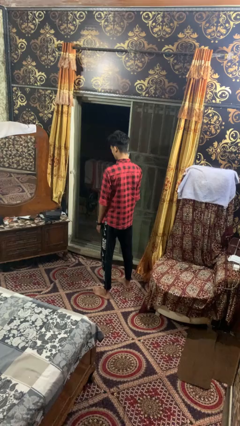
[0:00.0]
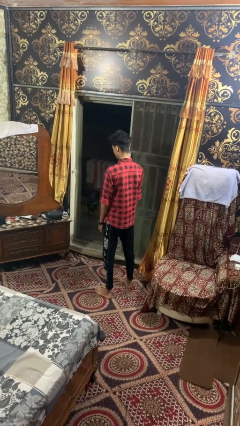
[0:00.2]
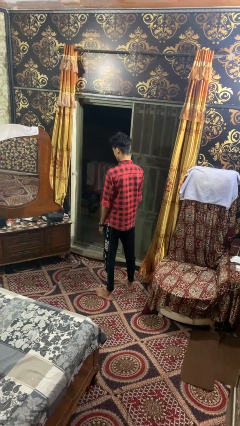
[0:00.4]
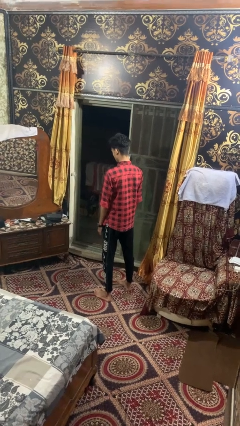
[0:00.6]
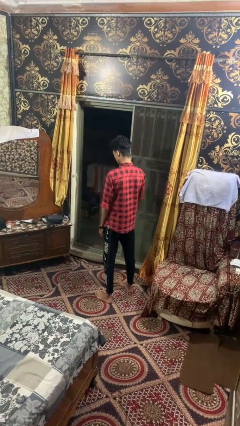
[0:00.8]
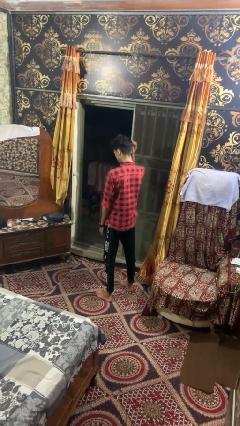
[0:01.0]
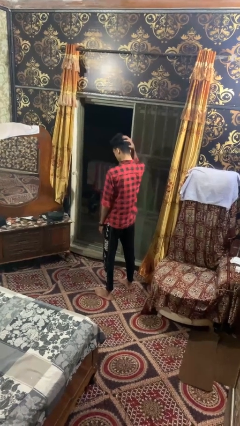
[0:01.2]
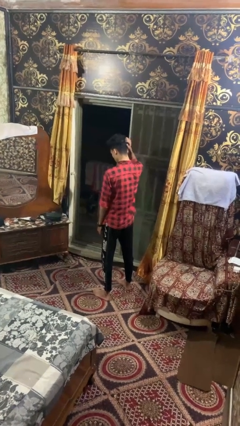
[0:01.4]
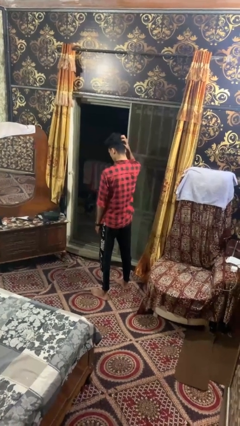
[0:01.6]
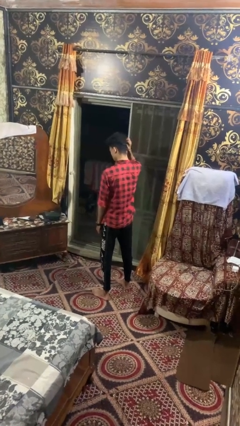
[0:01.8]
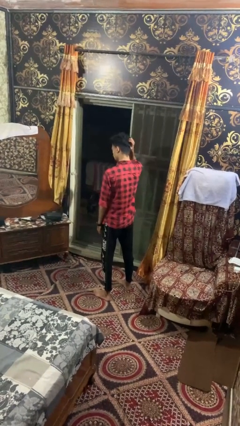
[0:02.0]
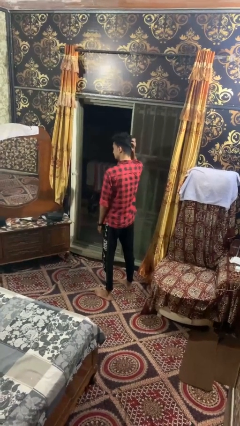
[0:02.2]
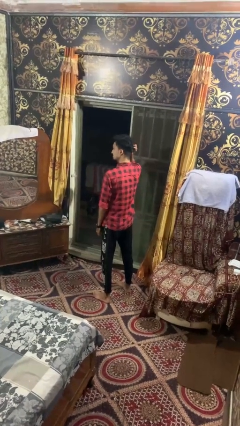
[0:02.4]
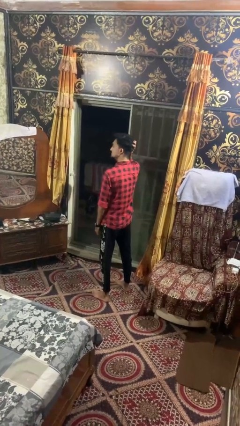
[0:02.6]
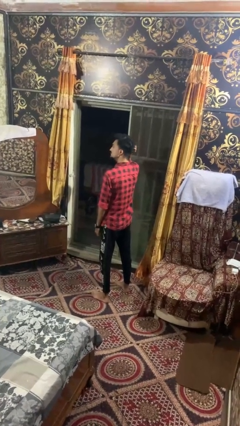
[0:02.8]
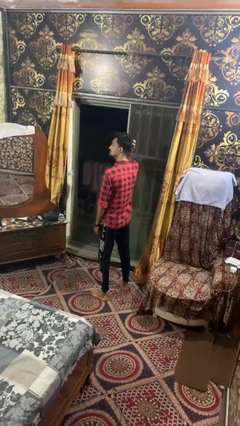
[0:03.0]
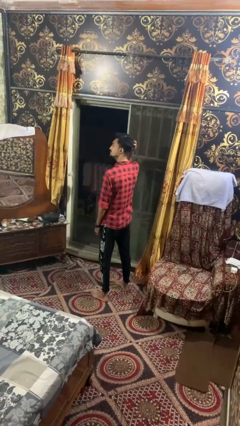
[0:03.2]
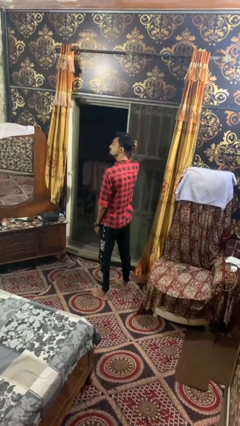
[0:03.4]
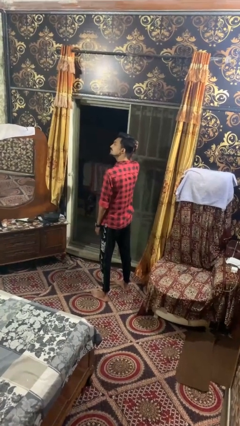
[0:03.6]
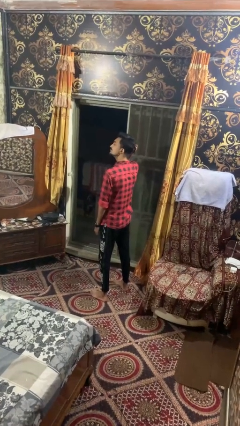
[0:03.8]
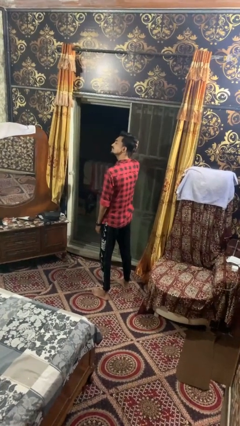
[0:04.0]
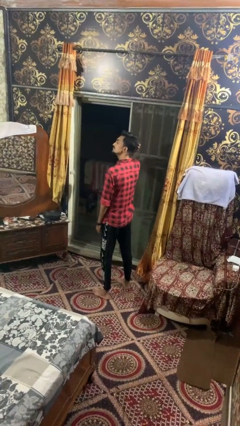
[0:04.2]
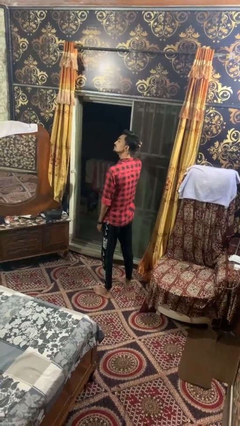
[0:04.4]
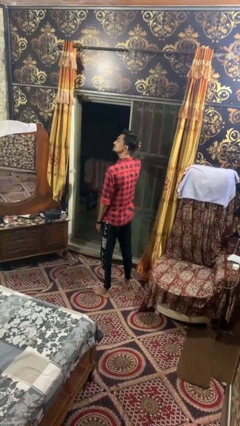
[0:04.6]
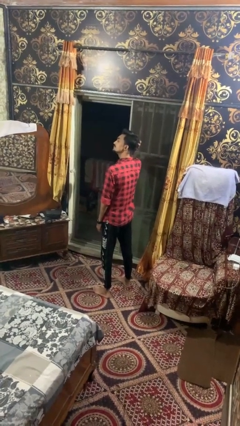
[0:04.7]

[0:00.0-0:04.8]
person scratches face

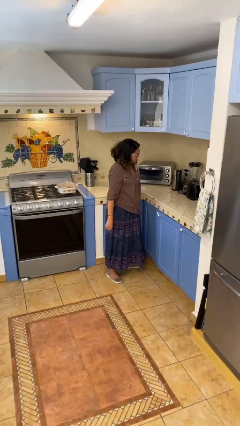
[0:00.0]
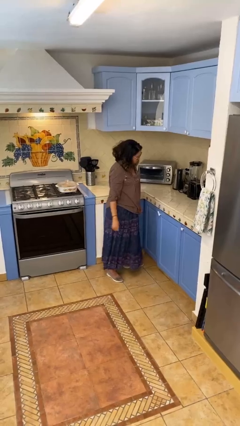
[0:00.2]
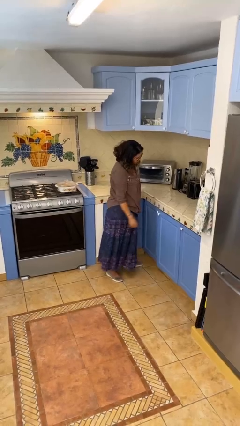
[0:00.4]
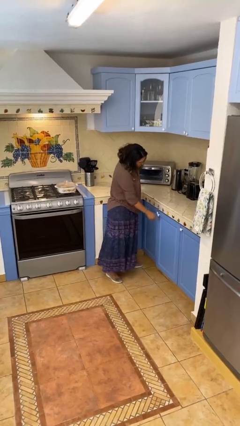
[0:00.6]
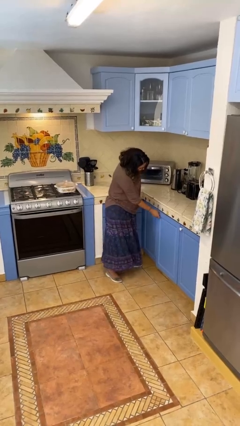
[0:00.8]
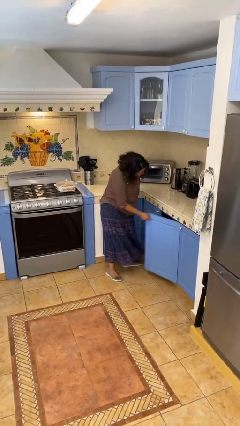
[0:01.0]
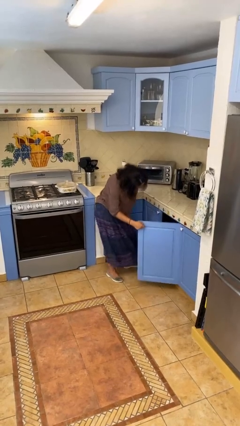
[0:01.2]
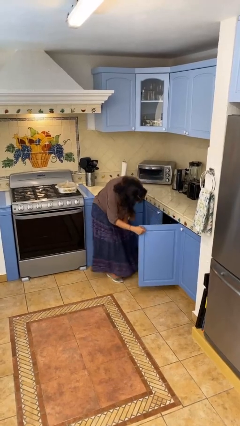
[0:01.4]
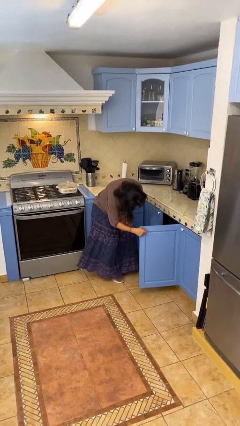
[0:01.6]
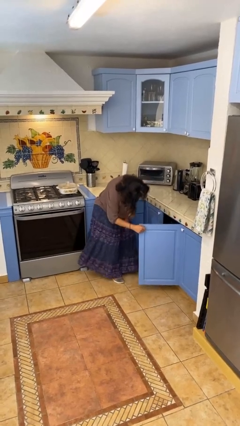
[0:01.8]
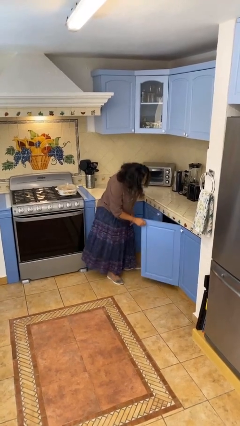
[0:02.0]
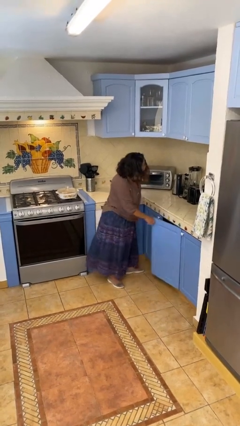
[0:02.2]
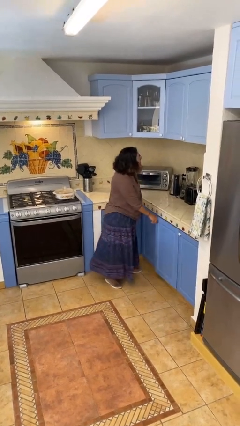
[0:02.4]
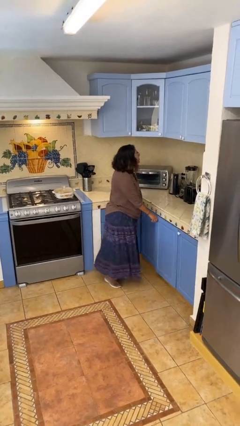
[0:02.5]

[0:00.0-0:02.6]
person closes cabinet

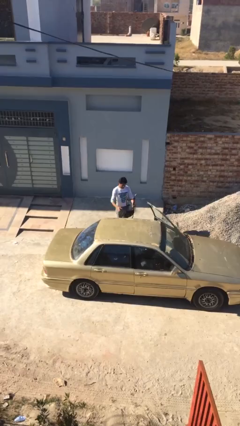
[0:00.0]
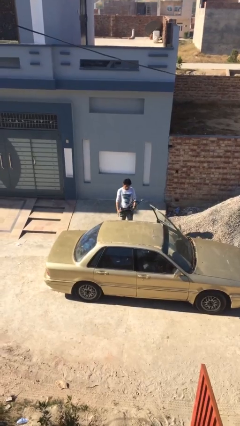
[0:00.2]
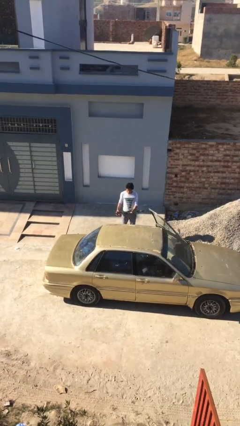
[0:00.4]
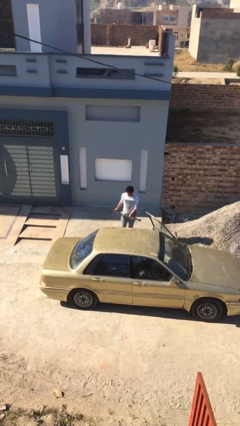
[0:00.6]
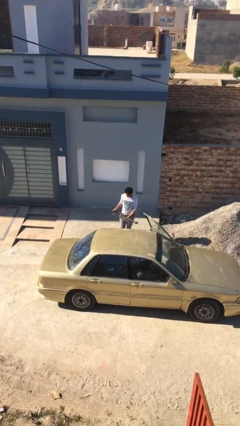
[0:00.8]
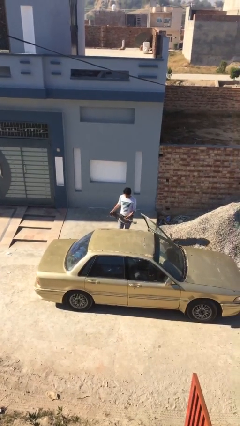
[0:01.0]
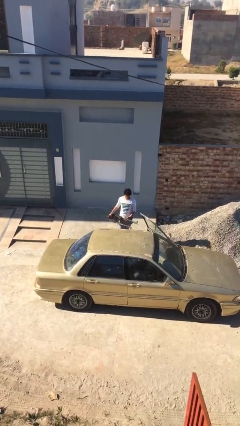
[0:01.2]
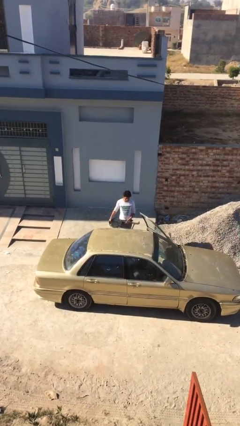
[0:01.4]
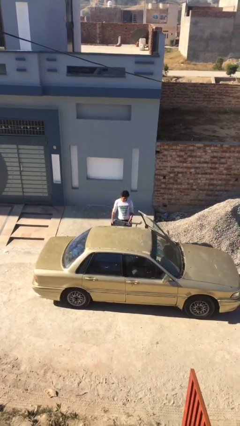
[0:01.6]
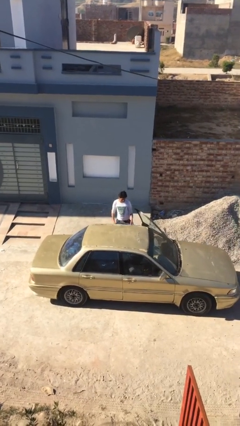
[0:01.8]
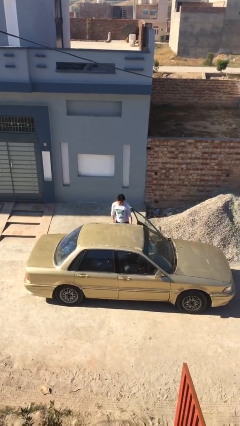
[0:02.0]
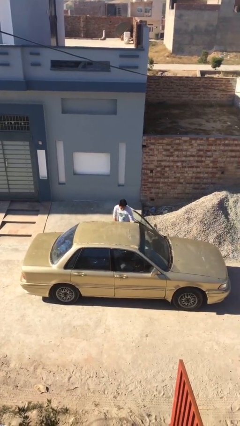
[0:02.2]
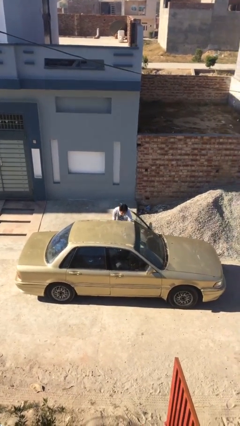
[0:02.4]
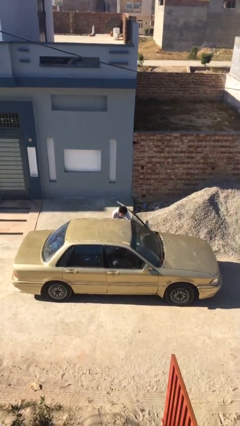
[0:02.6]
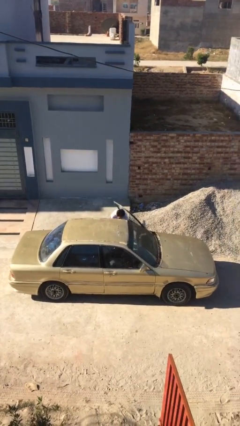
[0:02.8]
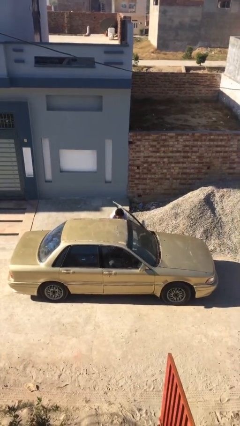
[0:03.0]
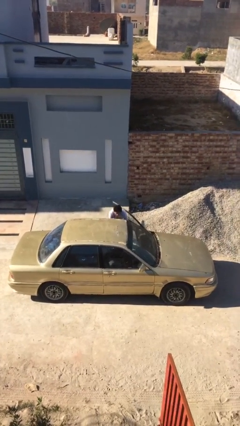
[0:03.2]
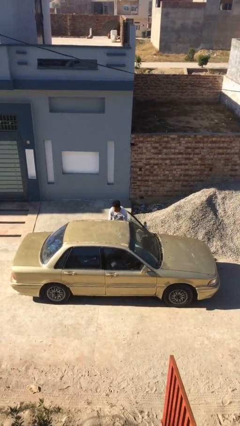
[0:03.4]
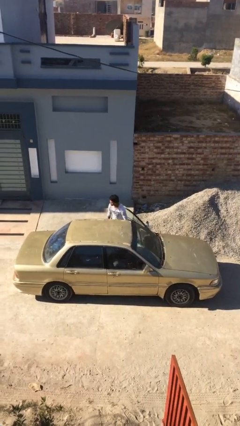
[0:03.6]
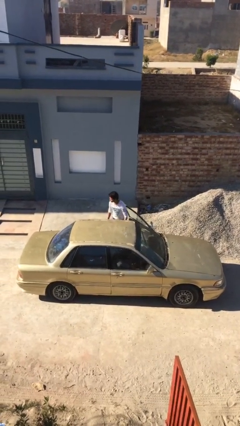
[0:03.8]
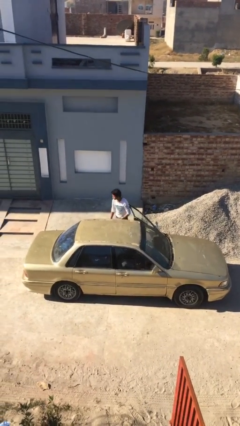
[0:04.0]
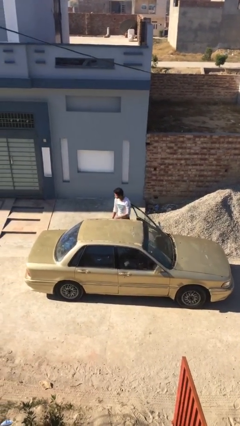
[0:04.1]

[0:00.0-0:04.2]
person loads car

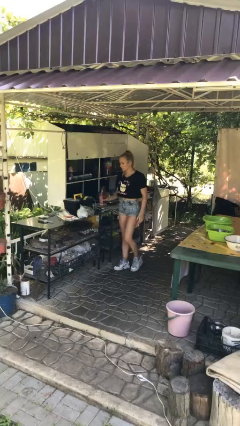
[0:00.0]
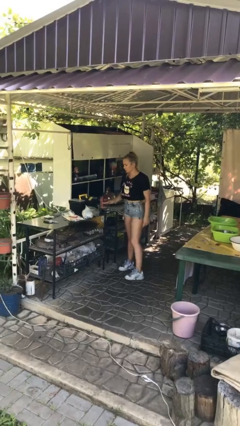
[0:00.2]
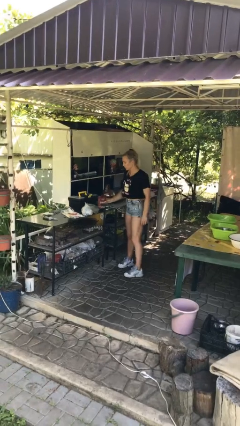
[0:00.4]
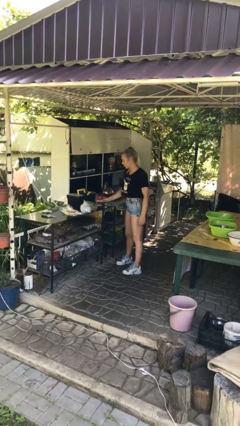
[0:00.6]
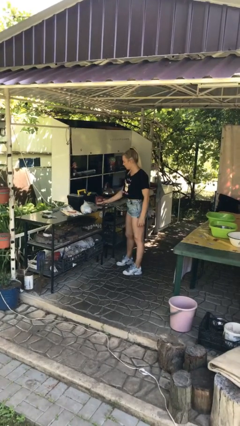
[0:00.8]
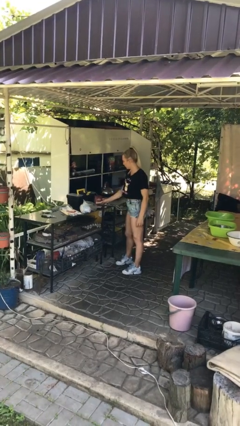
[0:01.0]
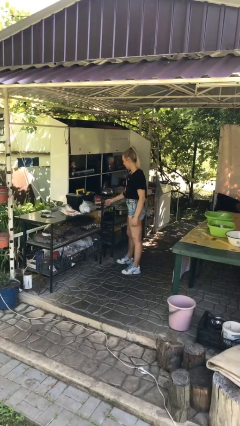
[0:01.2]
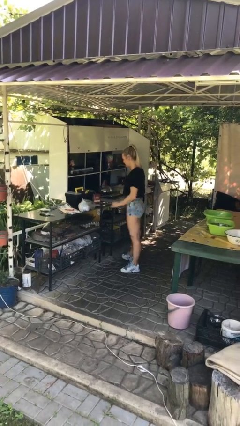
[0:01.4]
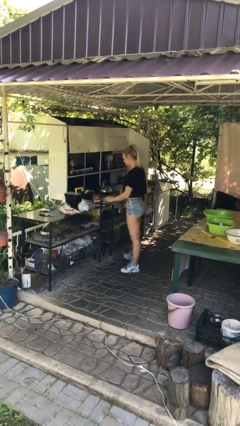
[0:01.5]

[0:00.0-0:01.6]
person puts down object on table

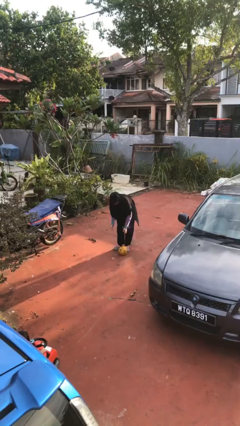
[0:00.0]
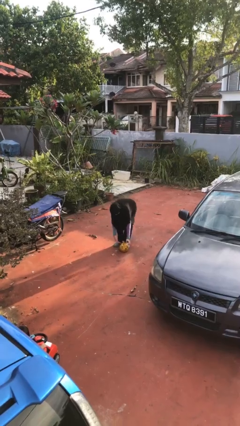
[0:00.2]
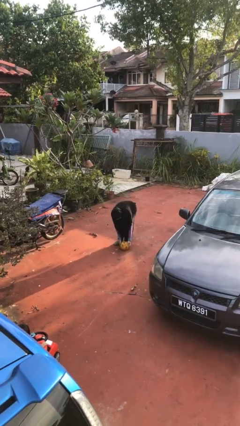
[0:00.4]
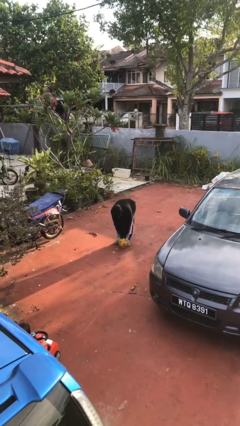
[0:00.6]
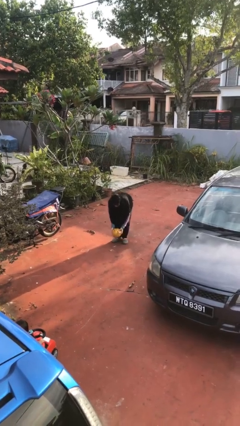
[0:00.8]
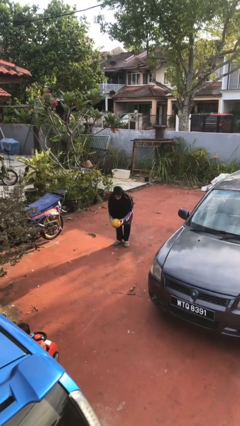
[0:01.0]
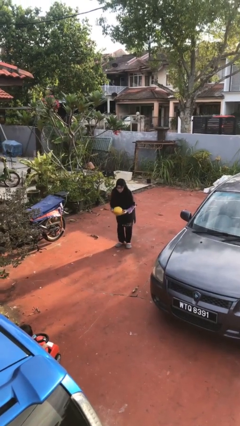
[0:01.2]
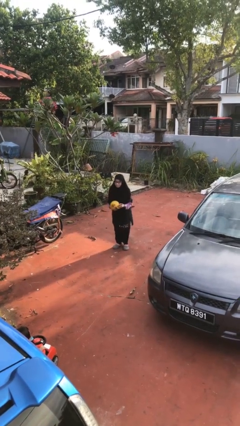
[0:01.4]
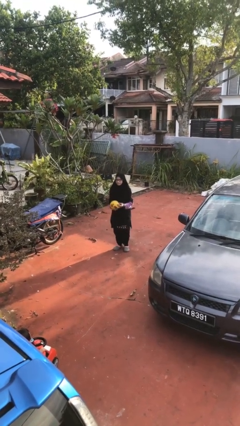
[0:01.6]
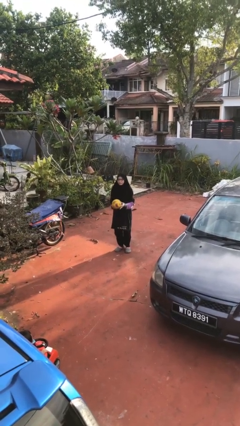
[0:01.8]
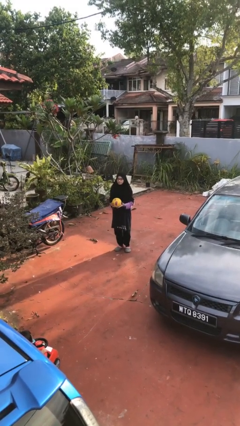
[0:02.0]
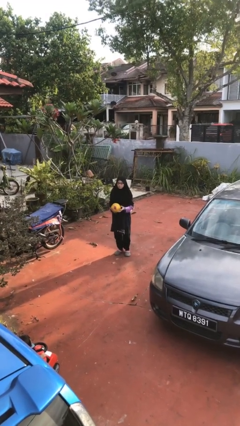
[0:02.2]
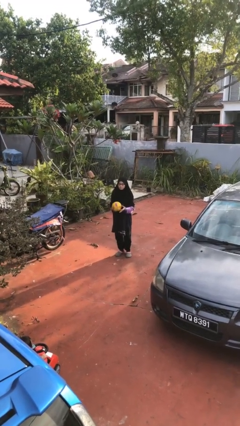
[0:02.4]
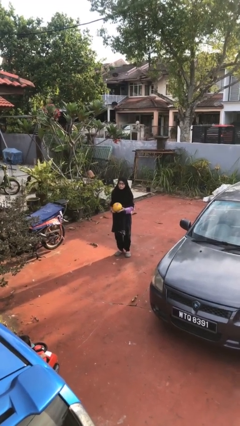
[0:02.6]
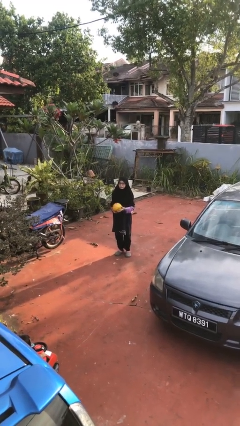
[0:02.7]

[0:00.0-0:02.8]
person picks up object from floor

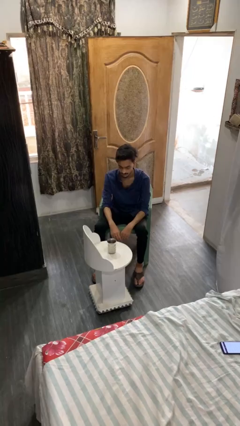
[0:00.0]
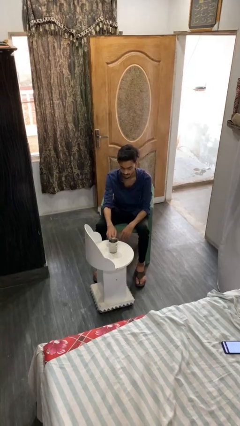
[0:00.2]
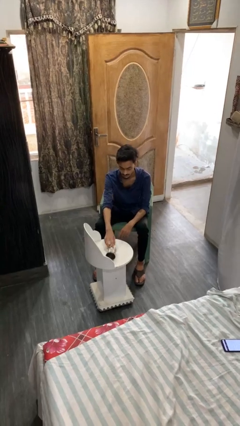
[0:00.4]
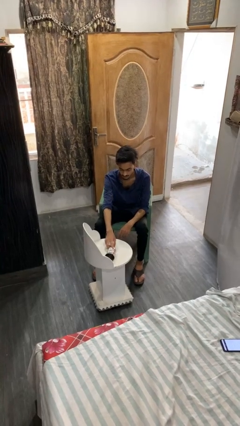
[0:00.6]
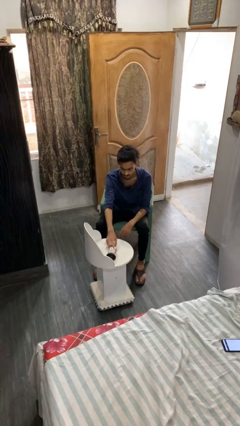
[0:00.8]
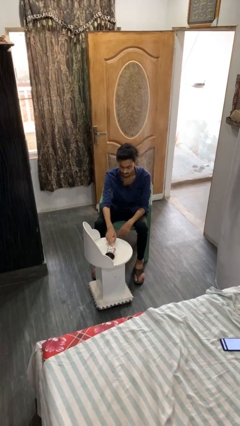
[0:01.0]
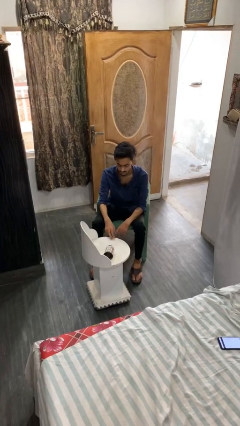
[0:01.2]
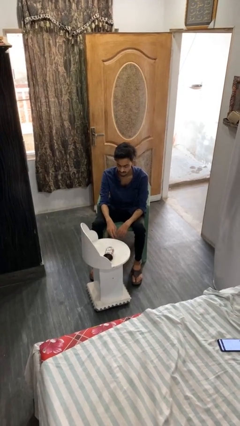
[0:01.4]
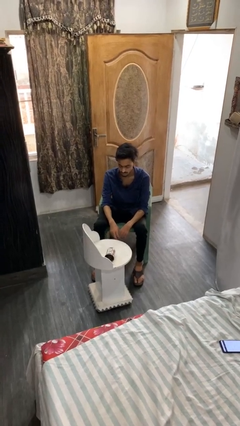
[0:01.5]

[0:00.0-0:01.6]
person knocks over glass
